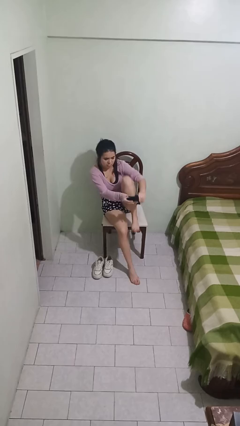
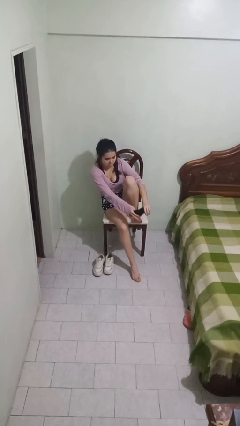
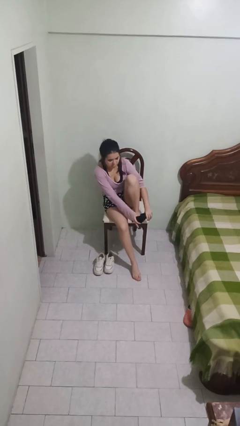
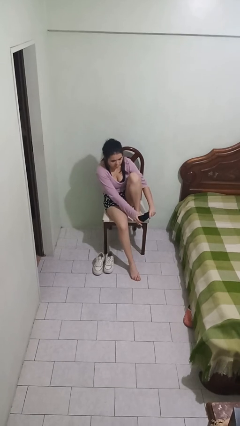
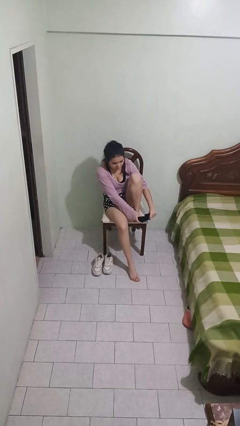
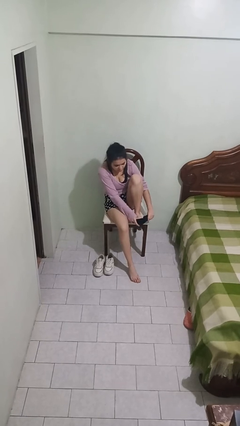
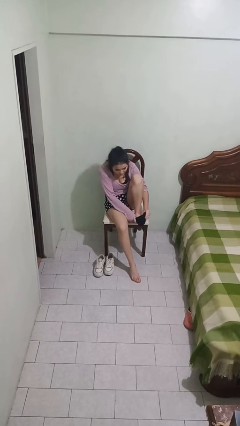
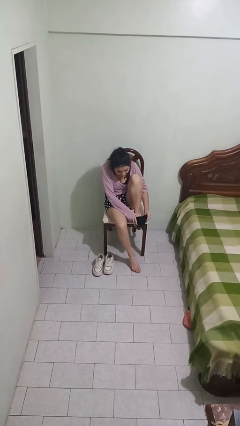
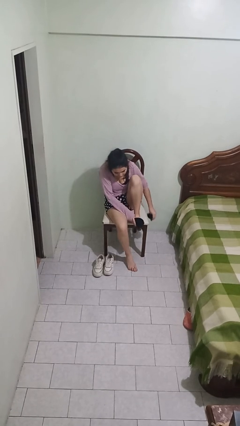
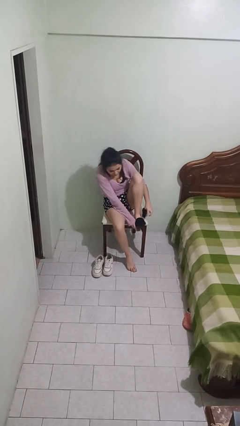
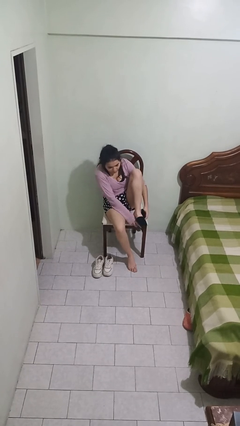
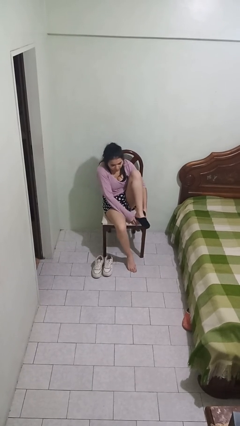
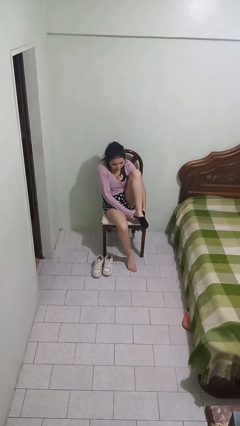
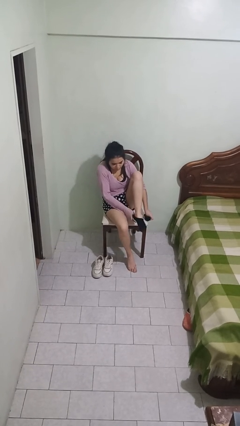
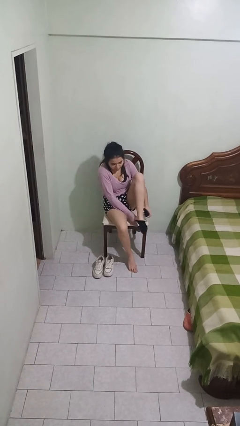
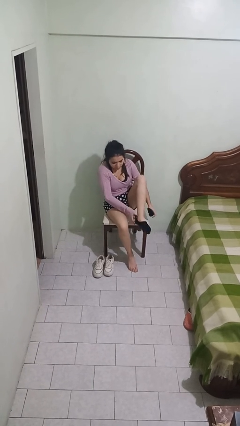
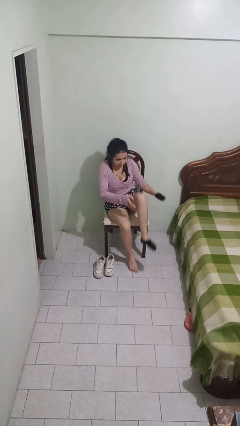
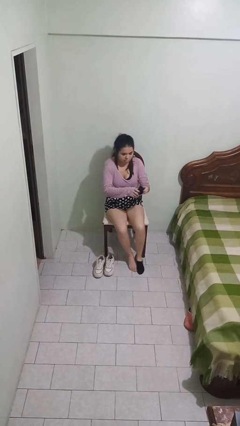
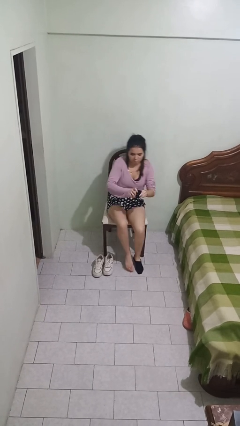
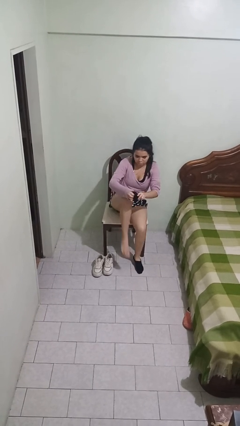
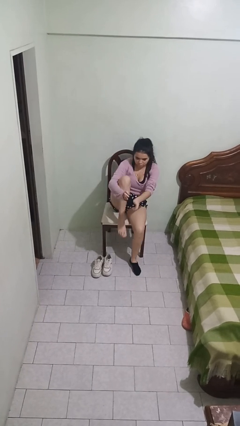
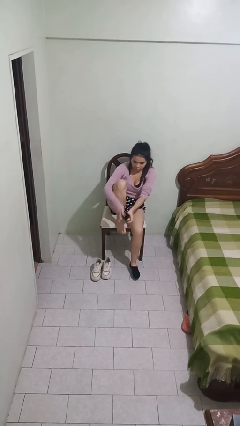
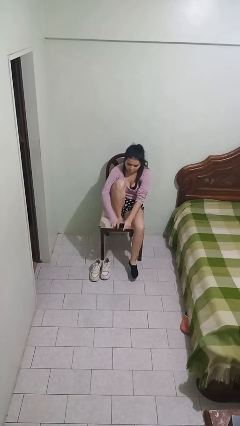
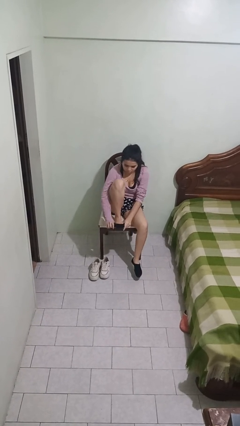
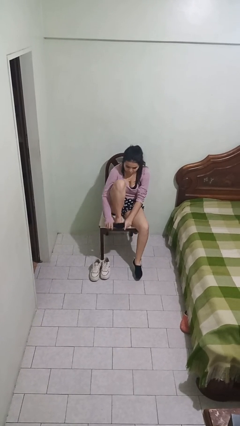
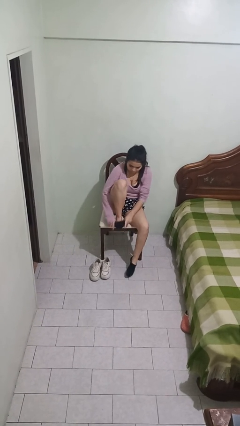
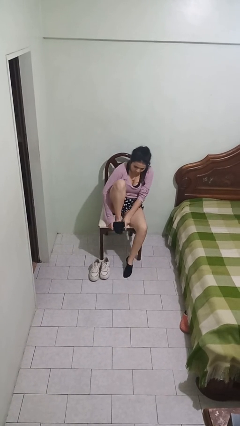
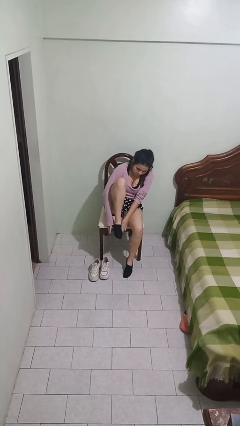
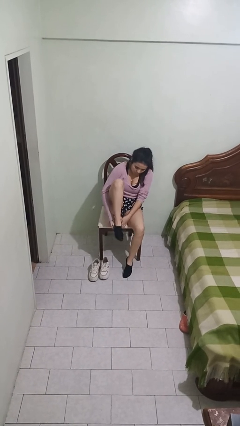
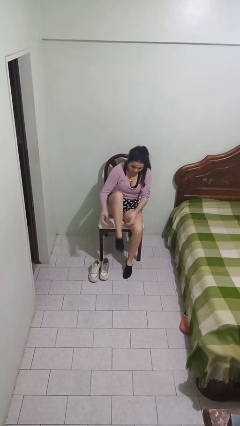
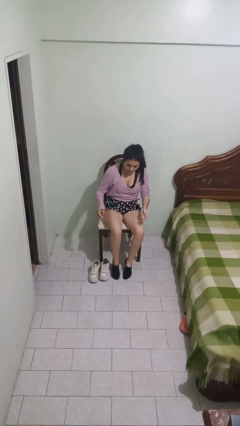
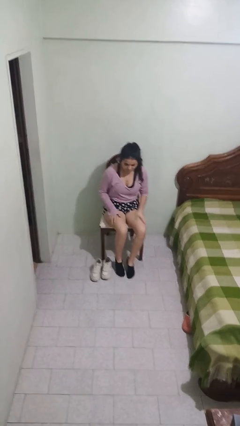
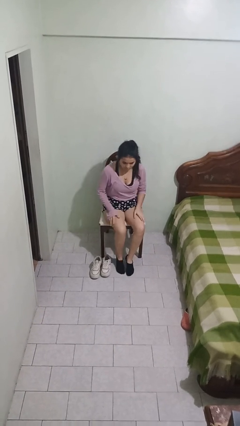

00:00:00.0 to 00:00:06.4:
person puts on socks

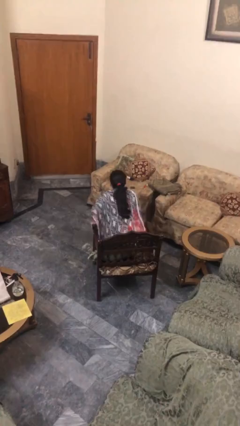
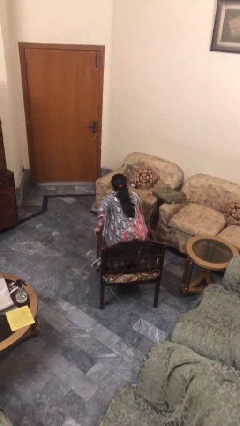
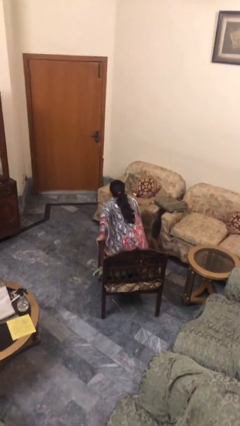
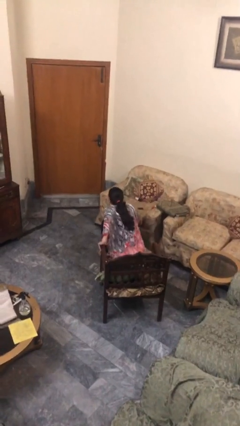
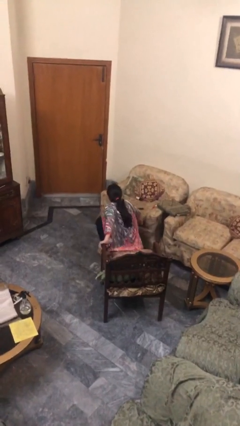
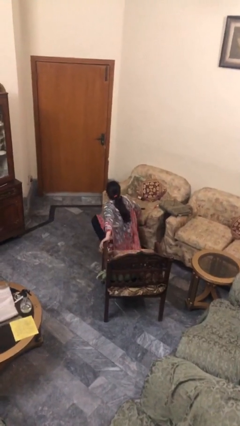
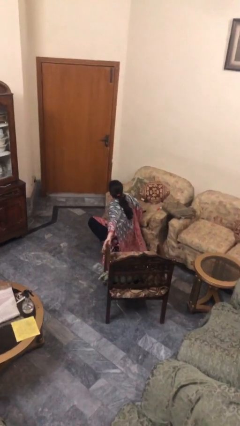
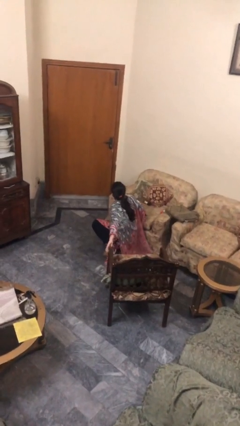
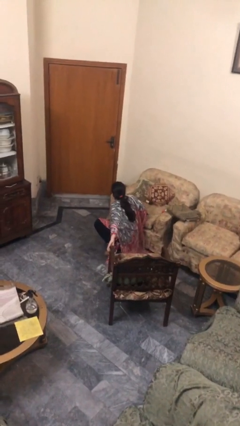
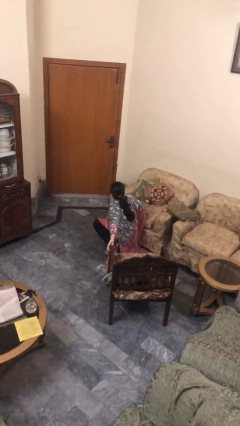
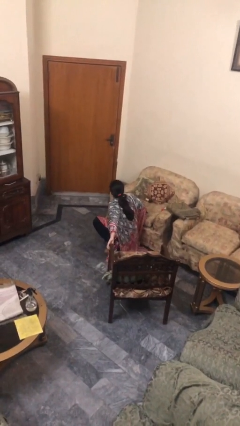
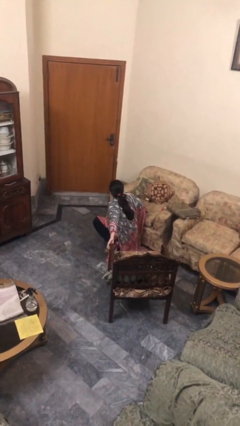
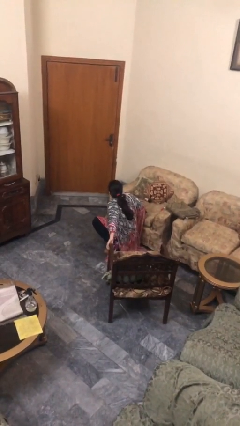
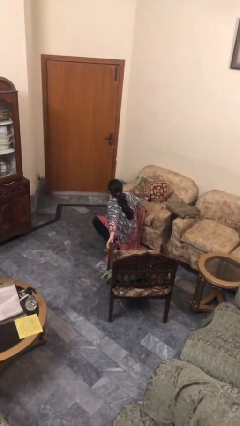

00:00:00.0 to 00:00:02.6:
person falls from chair

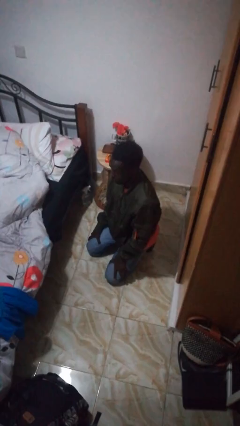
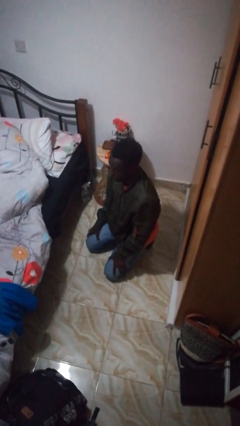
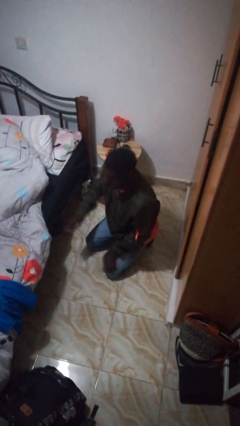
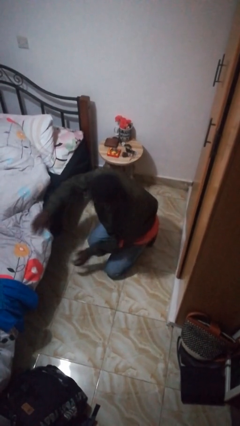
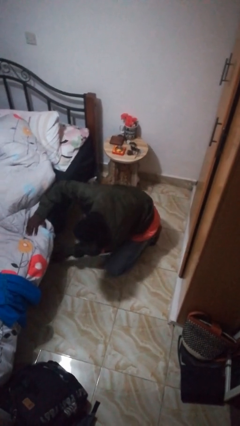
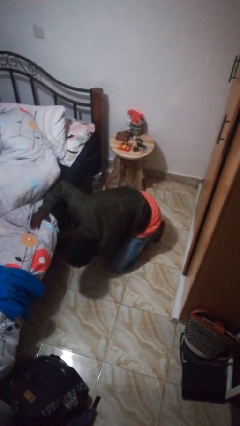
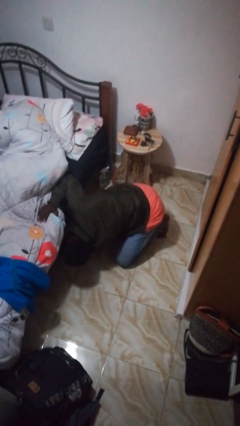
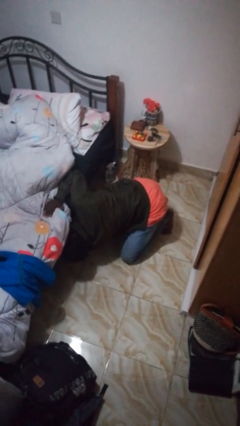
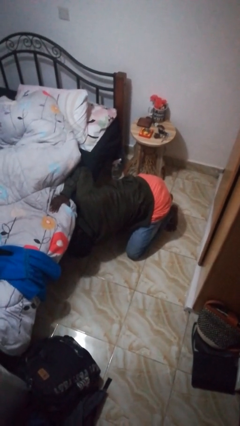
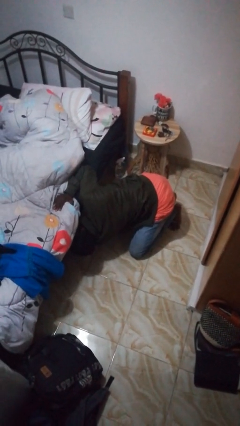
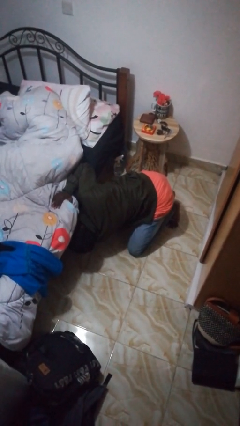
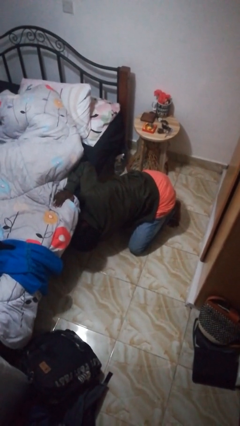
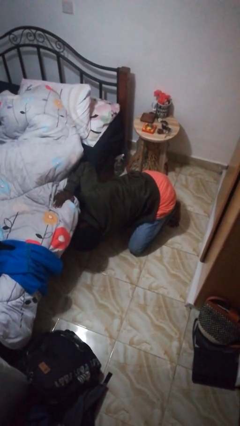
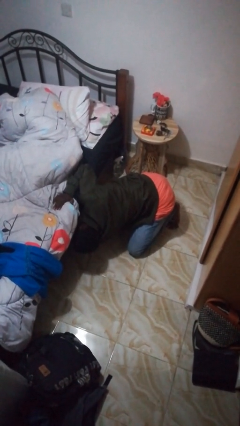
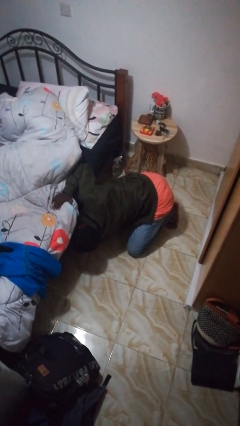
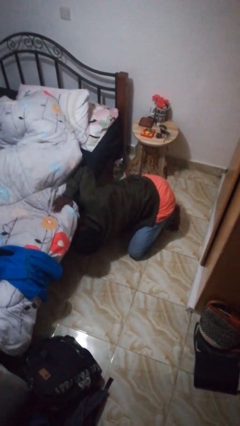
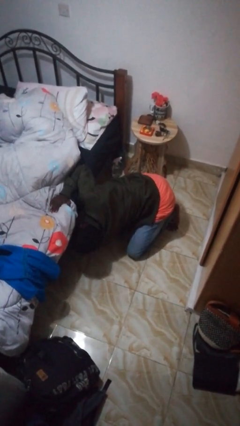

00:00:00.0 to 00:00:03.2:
person searches under bed

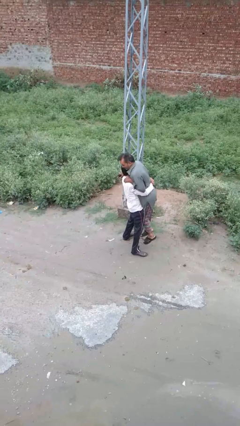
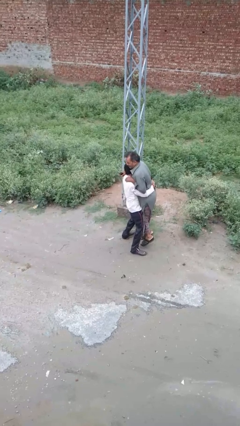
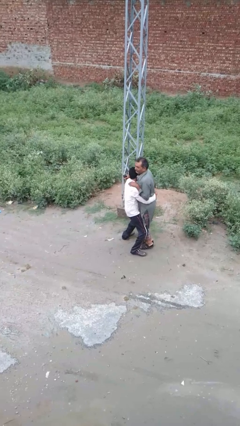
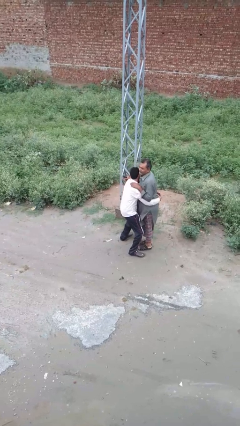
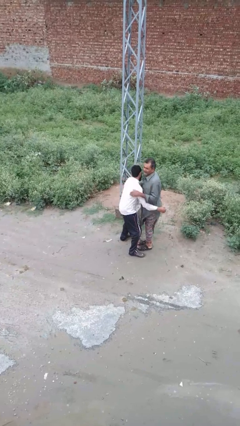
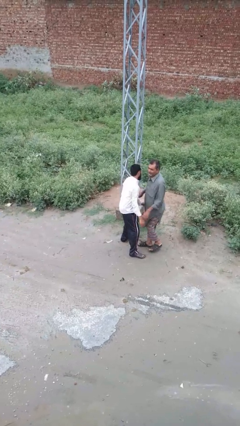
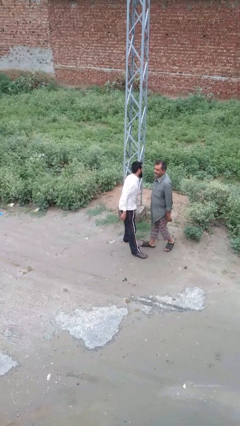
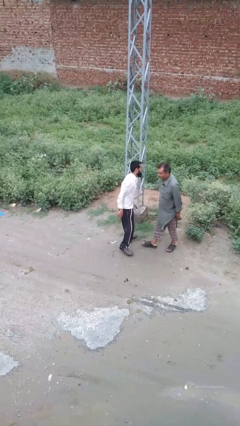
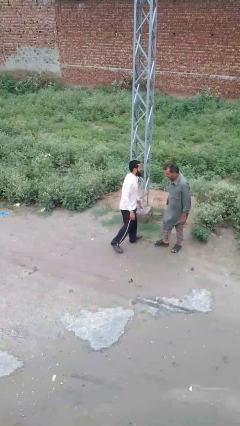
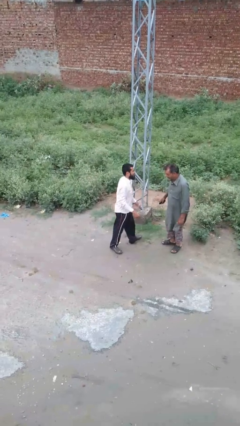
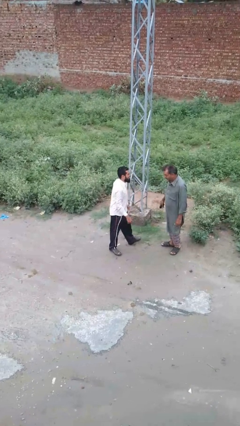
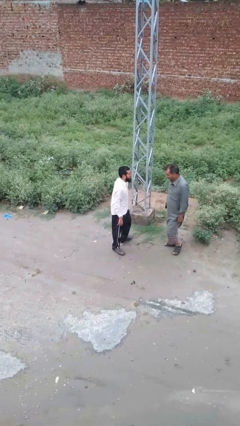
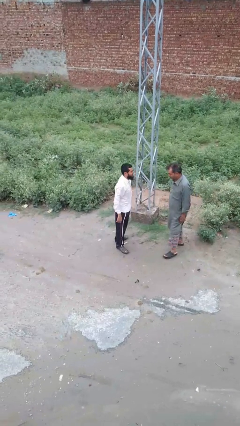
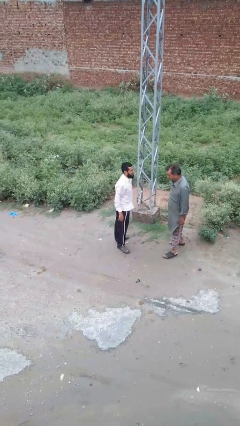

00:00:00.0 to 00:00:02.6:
person puts down person

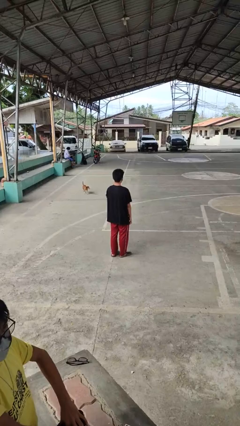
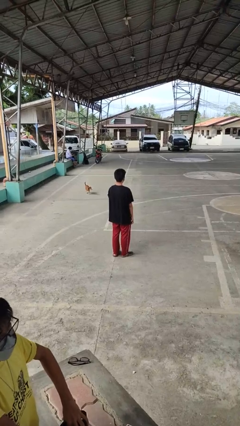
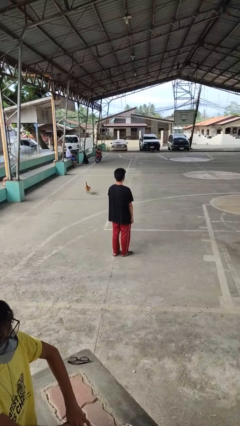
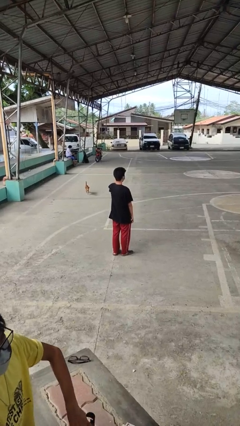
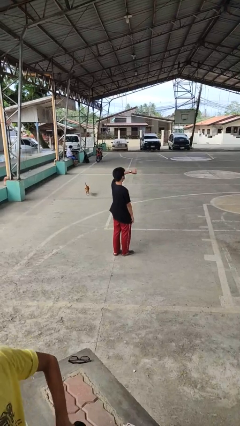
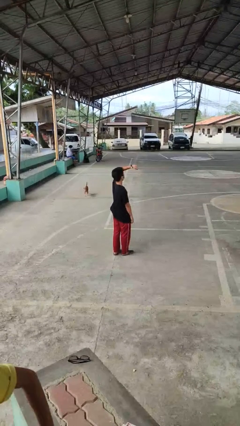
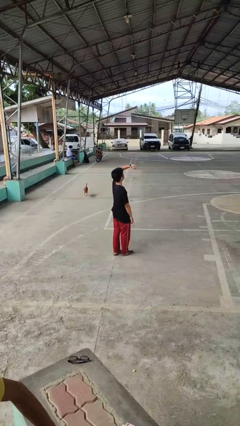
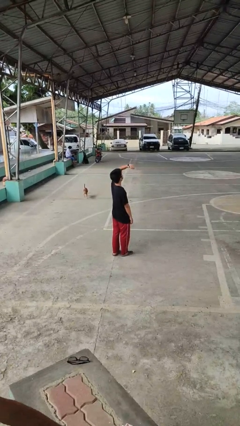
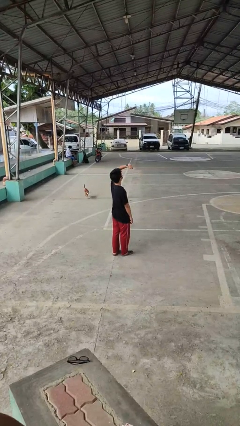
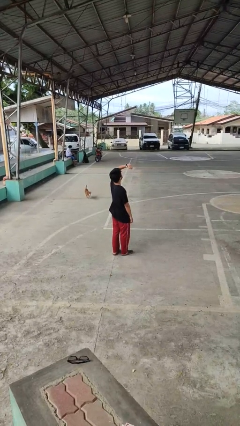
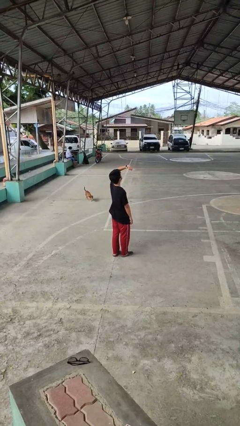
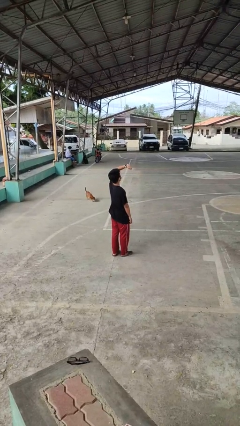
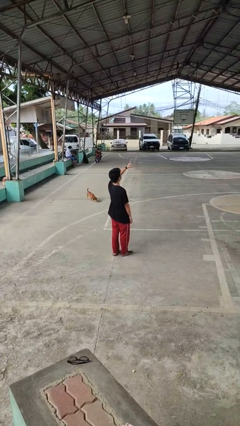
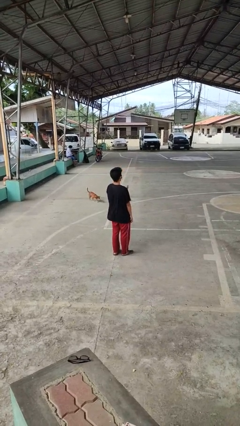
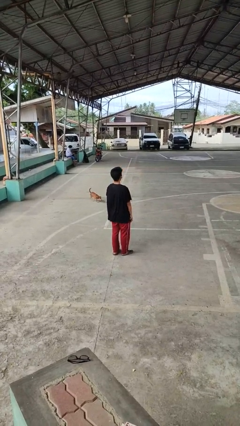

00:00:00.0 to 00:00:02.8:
person looks at wristwatch

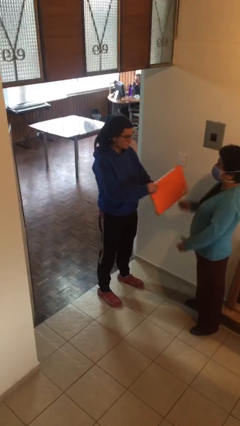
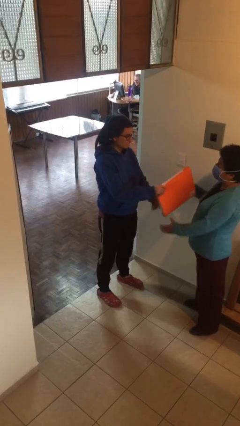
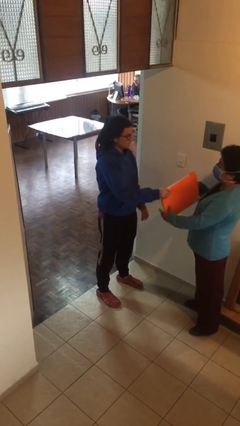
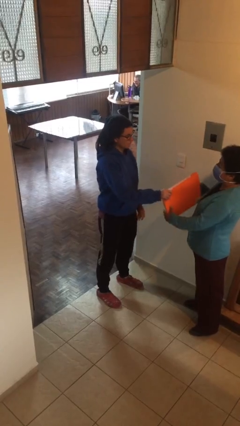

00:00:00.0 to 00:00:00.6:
person transfers object to person
